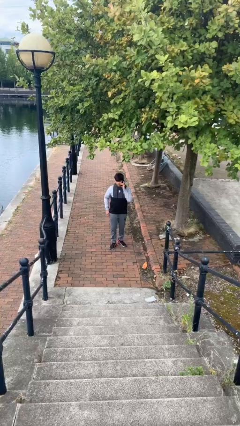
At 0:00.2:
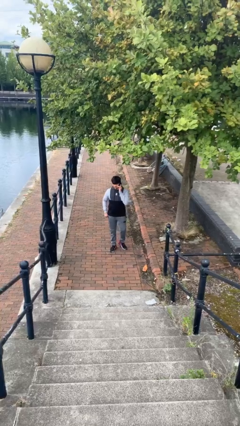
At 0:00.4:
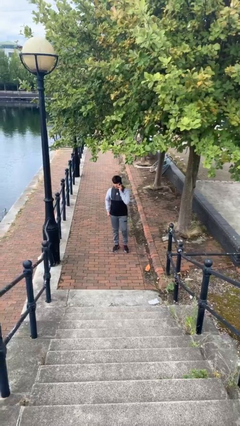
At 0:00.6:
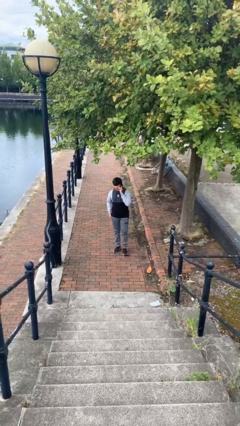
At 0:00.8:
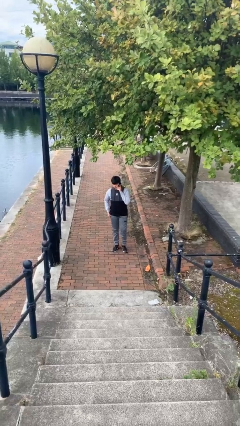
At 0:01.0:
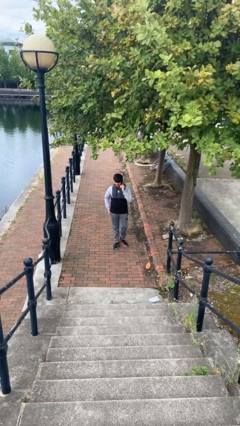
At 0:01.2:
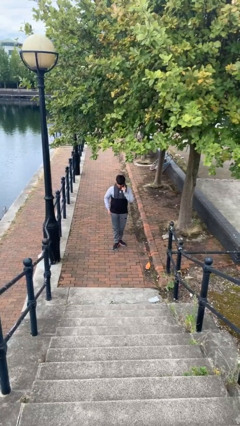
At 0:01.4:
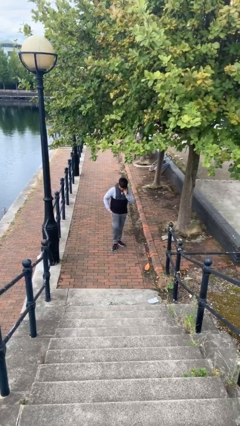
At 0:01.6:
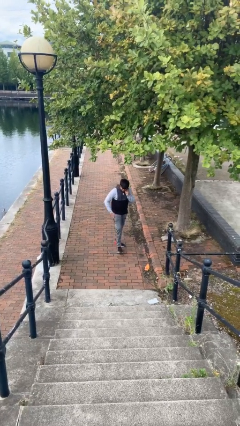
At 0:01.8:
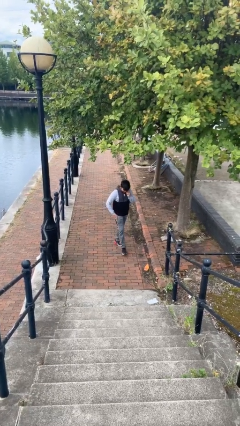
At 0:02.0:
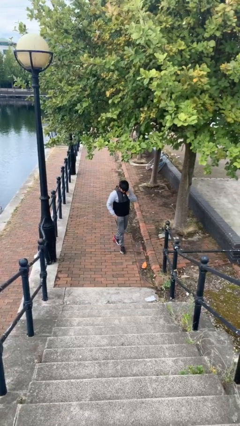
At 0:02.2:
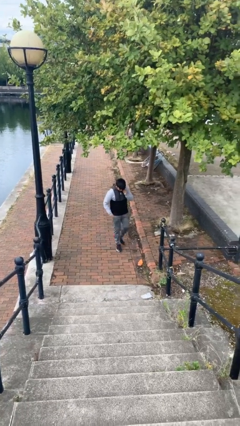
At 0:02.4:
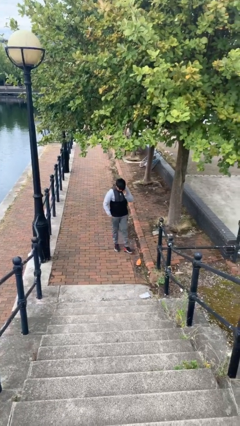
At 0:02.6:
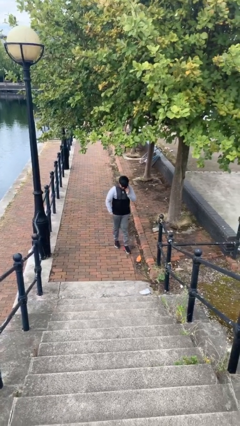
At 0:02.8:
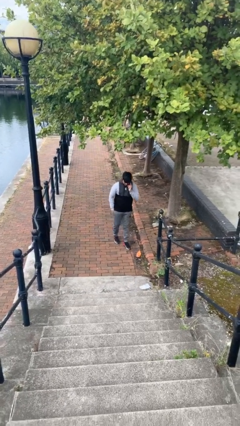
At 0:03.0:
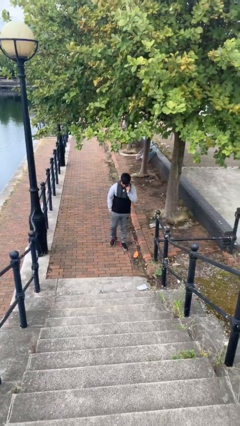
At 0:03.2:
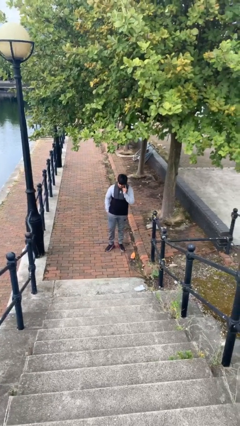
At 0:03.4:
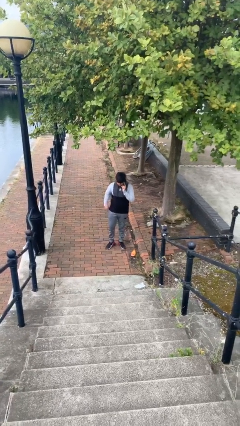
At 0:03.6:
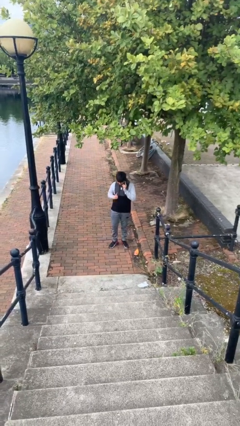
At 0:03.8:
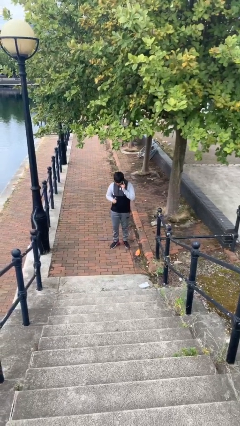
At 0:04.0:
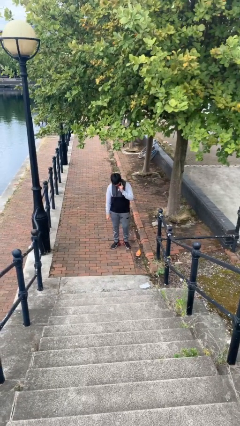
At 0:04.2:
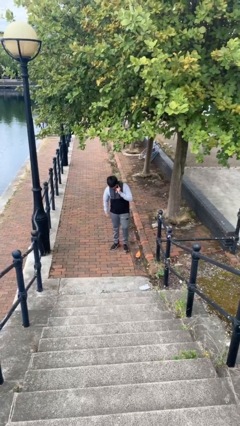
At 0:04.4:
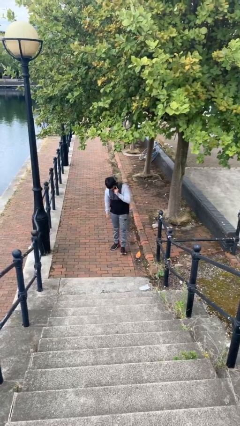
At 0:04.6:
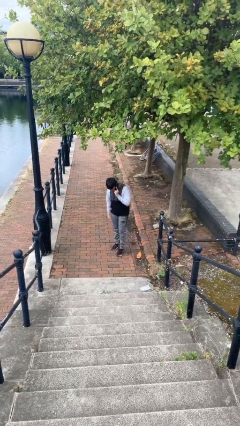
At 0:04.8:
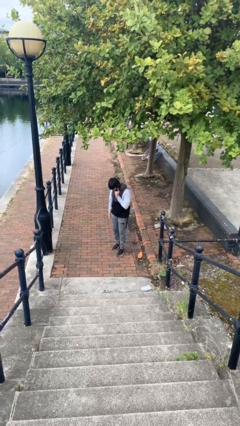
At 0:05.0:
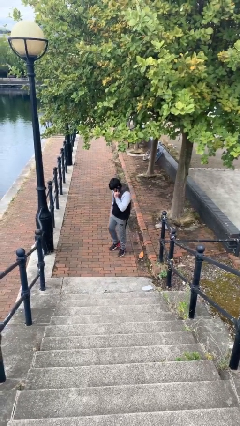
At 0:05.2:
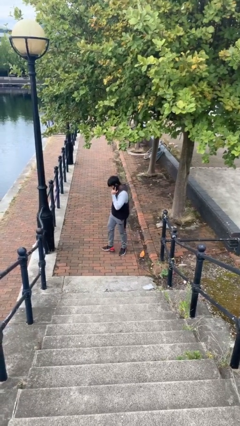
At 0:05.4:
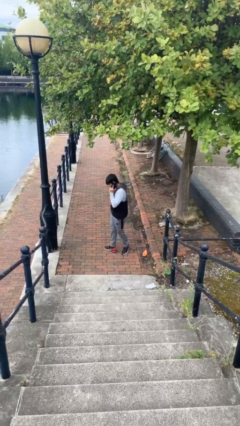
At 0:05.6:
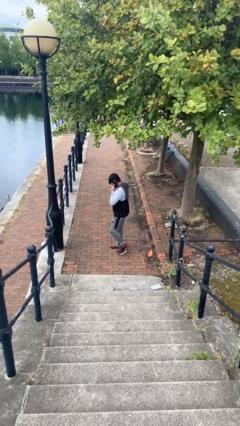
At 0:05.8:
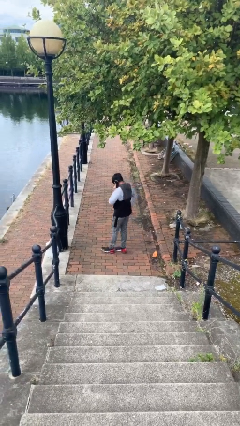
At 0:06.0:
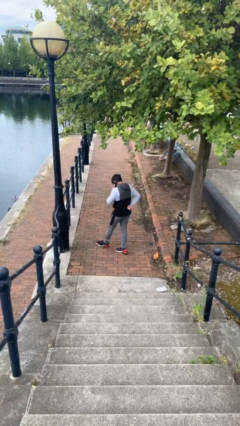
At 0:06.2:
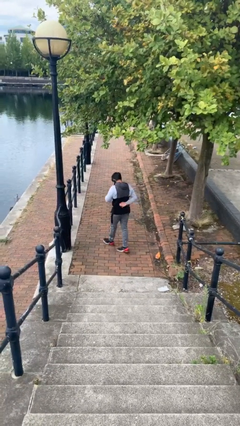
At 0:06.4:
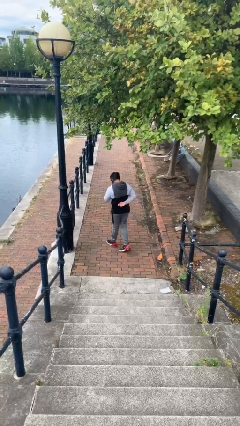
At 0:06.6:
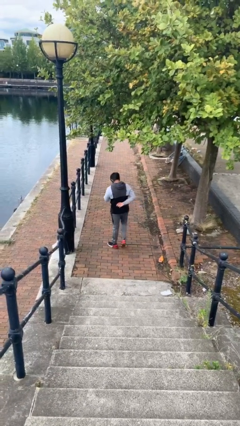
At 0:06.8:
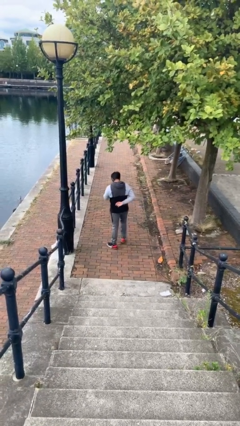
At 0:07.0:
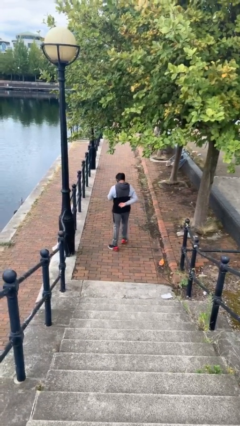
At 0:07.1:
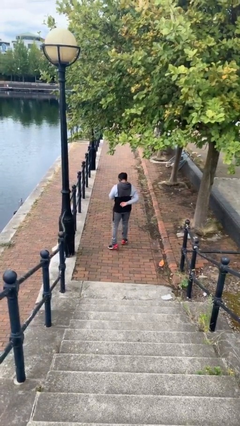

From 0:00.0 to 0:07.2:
person talks on phone

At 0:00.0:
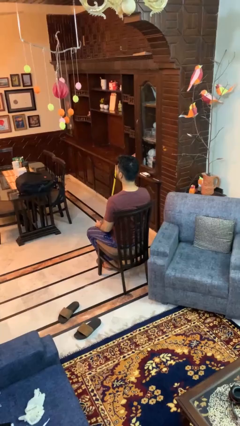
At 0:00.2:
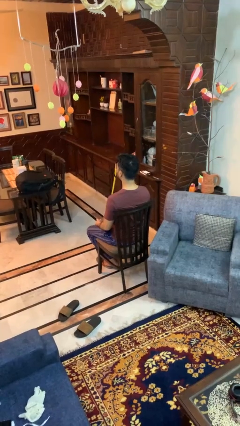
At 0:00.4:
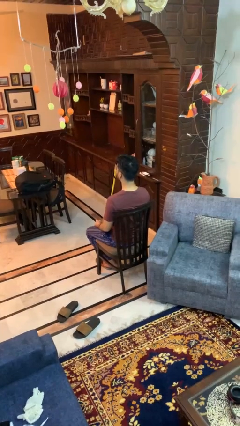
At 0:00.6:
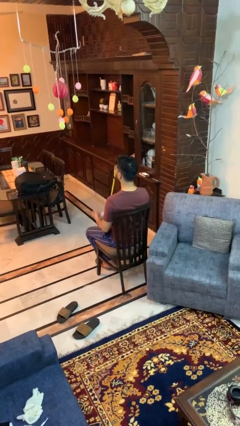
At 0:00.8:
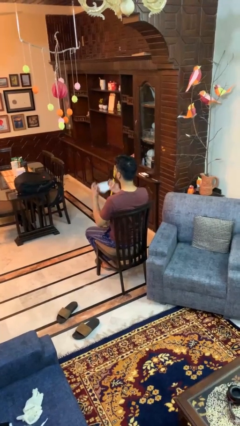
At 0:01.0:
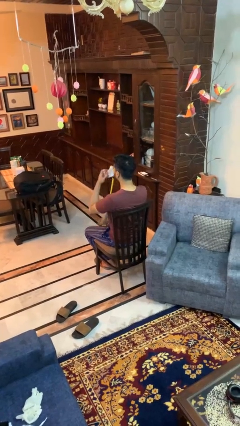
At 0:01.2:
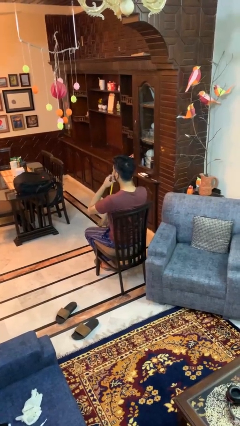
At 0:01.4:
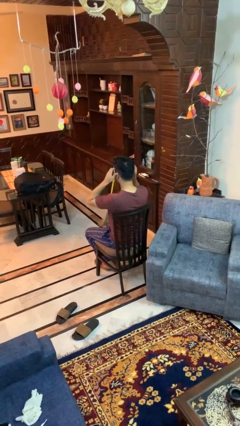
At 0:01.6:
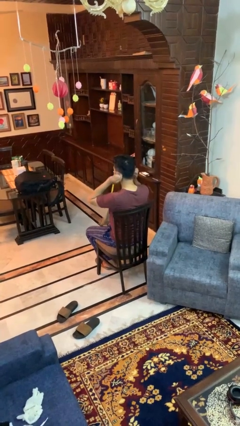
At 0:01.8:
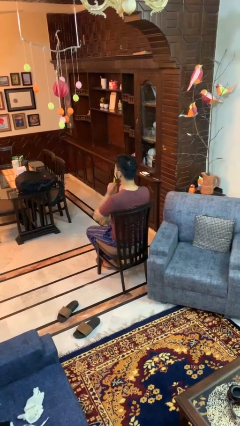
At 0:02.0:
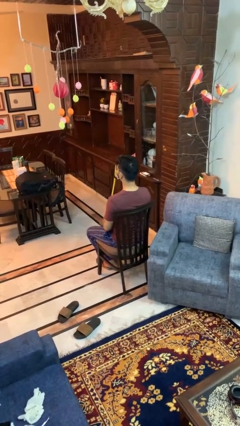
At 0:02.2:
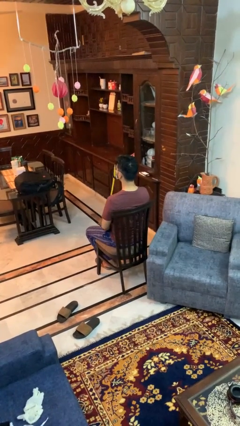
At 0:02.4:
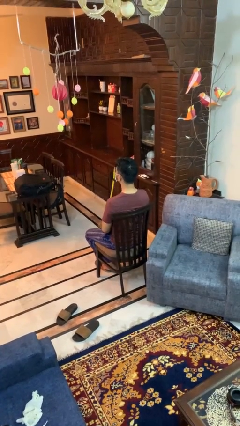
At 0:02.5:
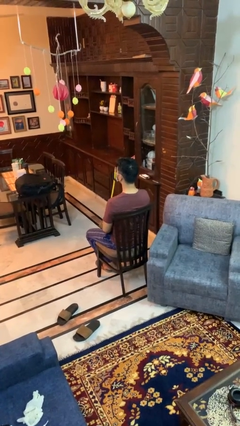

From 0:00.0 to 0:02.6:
person puts on facemask

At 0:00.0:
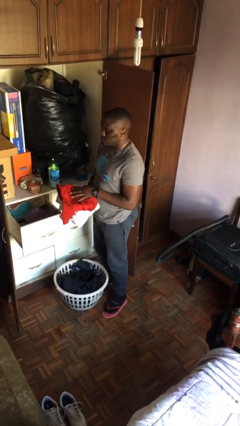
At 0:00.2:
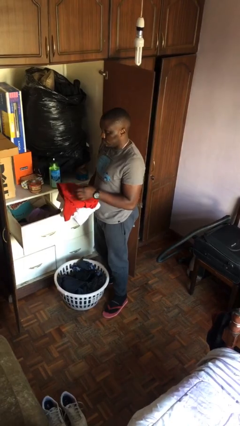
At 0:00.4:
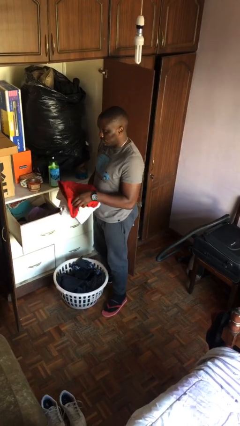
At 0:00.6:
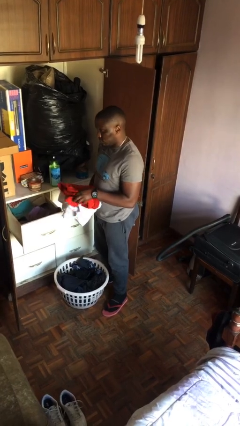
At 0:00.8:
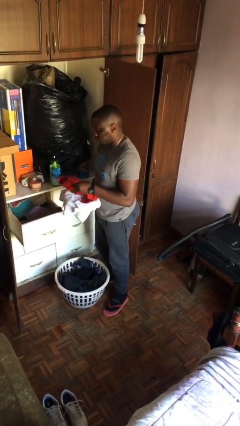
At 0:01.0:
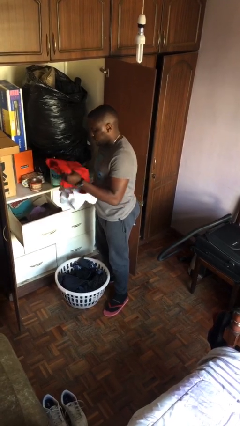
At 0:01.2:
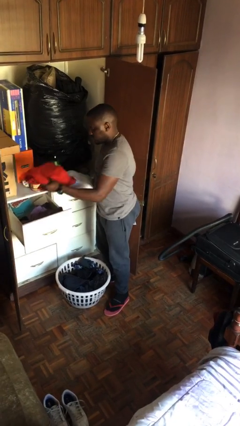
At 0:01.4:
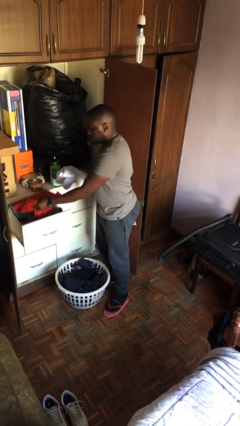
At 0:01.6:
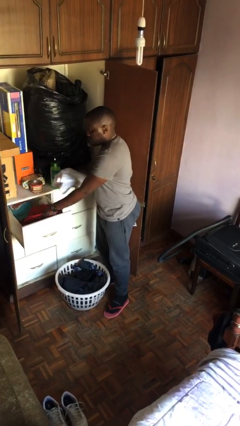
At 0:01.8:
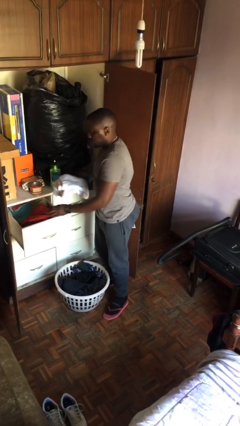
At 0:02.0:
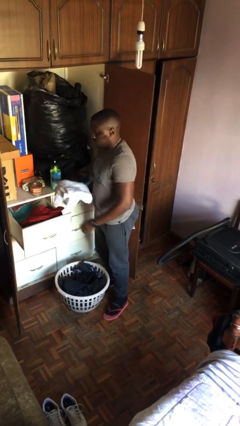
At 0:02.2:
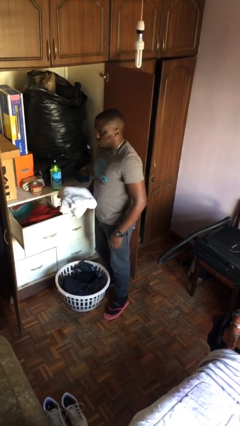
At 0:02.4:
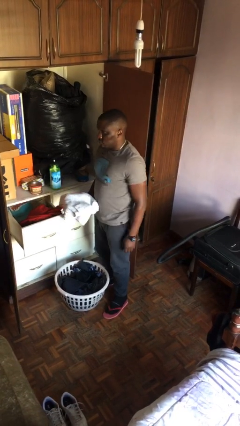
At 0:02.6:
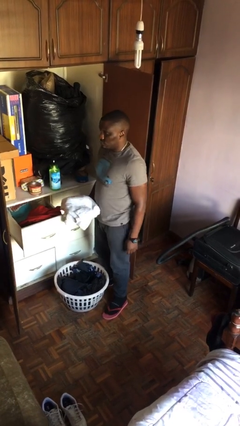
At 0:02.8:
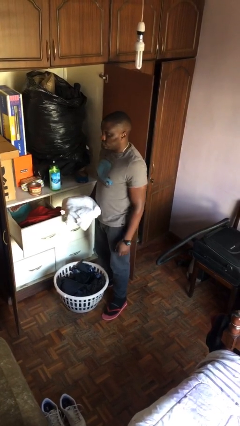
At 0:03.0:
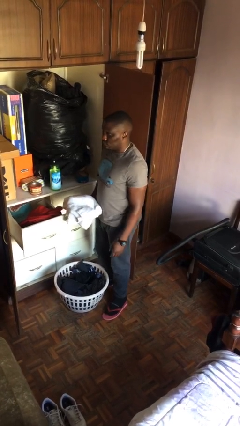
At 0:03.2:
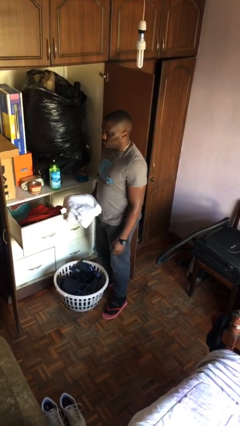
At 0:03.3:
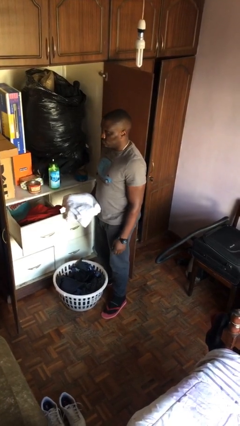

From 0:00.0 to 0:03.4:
person puts clothes into dresser

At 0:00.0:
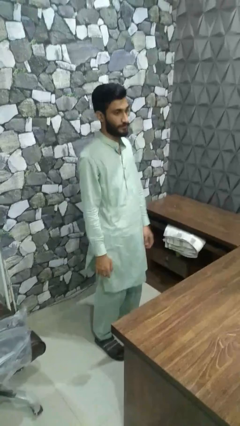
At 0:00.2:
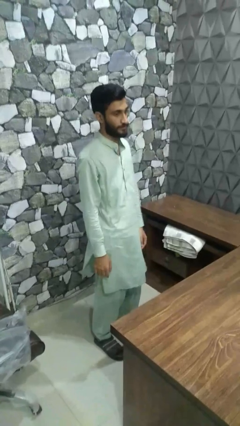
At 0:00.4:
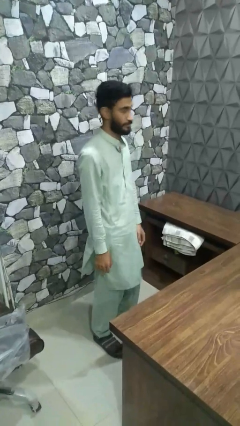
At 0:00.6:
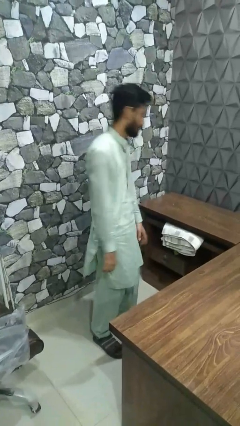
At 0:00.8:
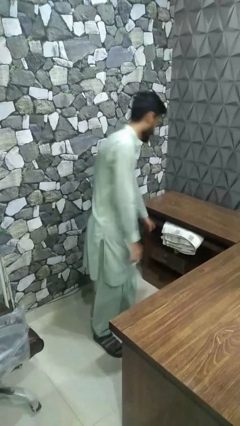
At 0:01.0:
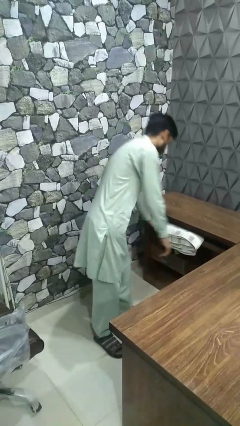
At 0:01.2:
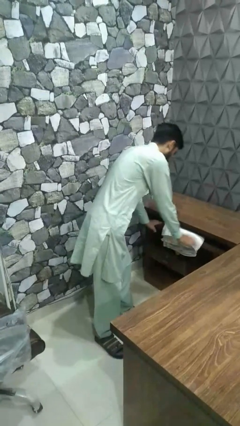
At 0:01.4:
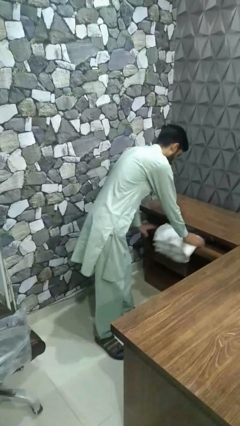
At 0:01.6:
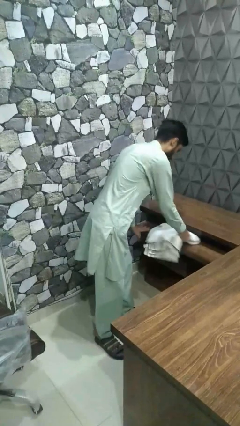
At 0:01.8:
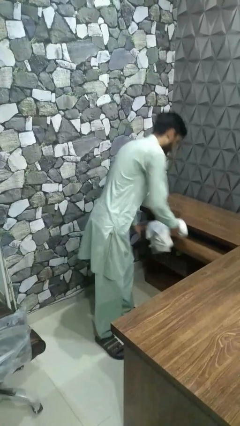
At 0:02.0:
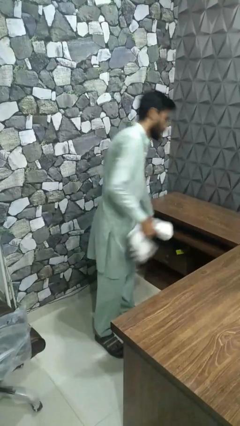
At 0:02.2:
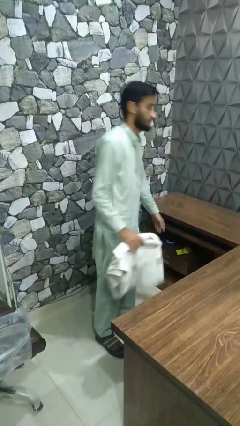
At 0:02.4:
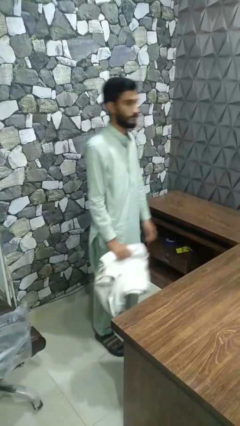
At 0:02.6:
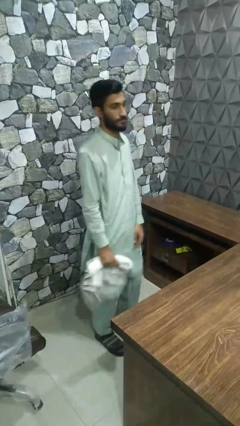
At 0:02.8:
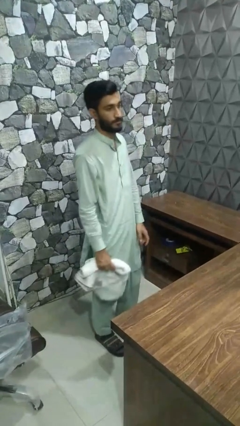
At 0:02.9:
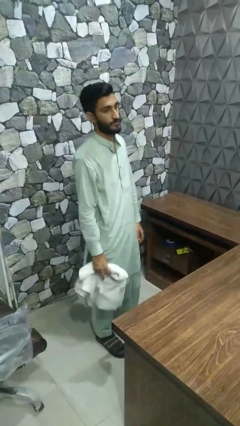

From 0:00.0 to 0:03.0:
person takes clothes from dresser

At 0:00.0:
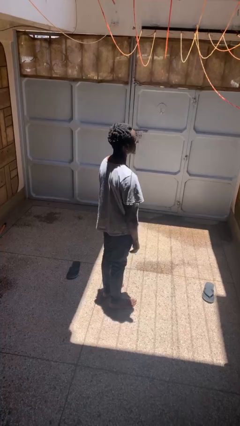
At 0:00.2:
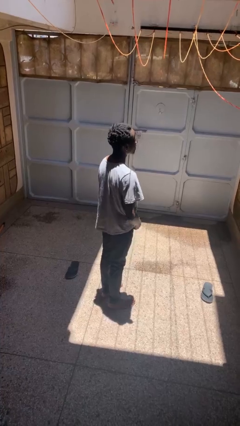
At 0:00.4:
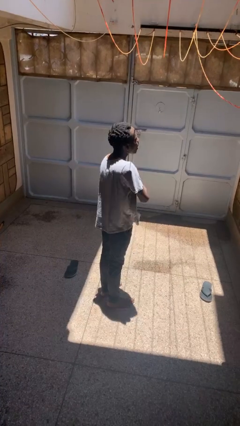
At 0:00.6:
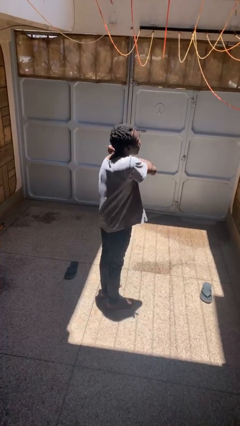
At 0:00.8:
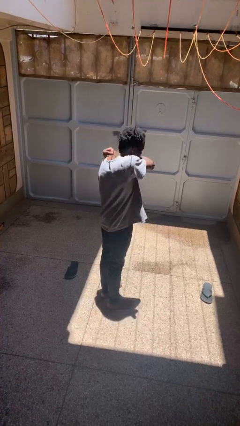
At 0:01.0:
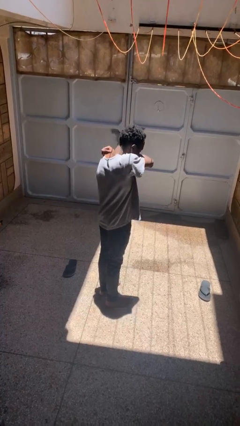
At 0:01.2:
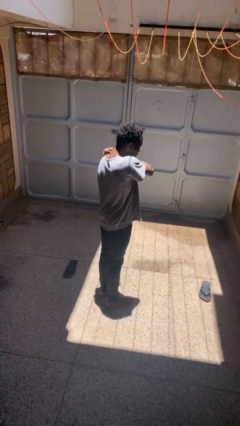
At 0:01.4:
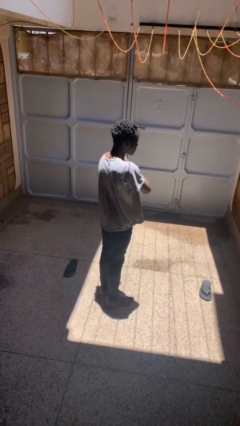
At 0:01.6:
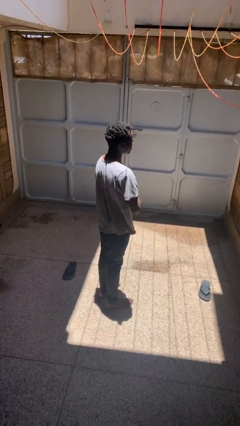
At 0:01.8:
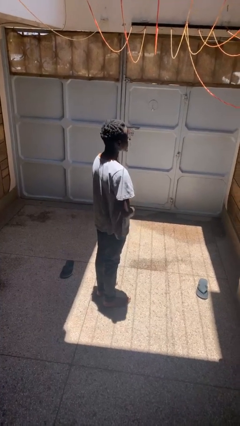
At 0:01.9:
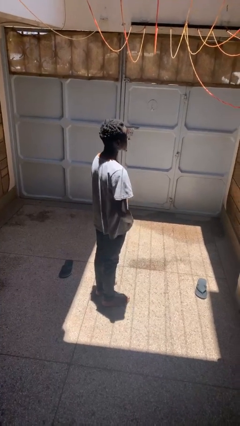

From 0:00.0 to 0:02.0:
person sneezes into arm
